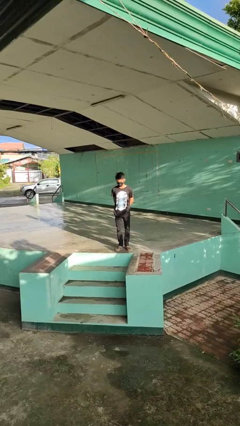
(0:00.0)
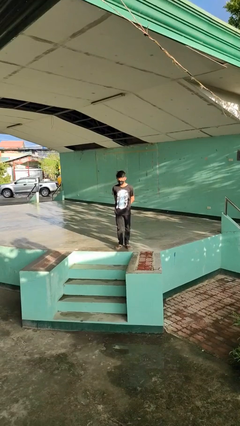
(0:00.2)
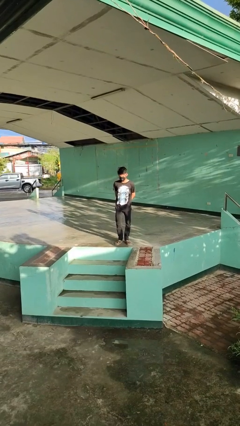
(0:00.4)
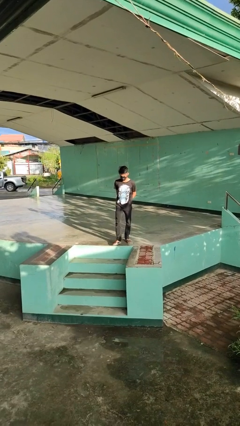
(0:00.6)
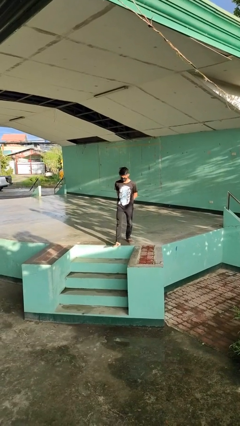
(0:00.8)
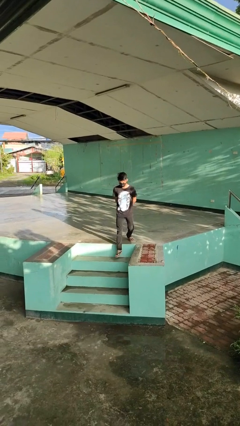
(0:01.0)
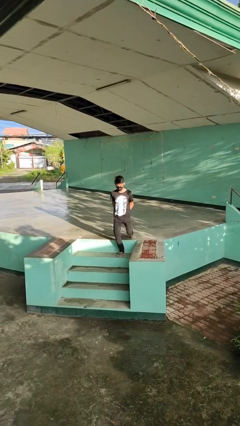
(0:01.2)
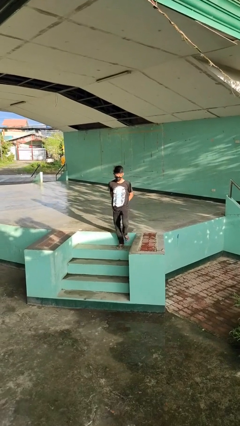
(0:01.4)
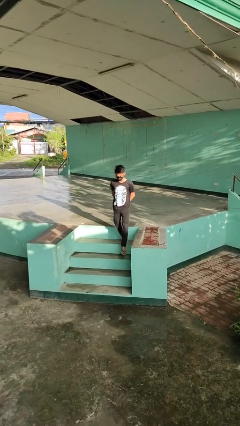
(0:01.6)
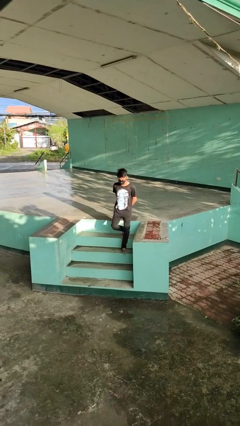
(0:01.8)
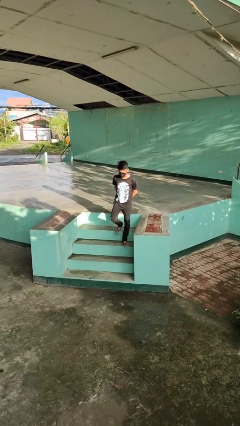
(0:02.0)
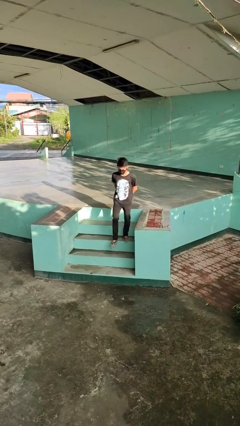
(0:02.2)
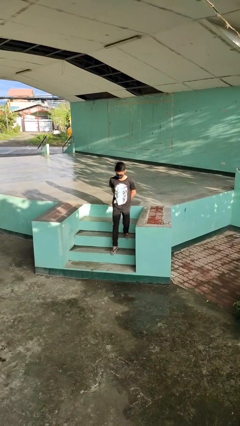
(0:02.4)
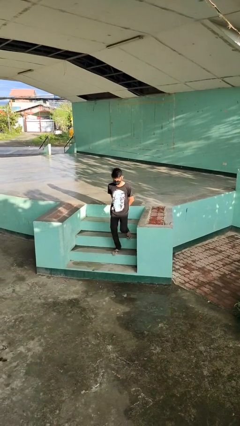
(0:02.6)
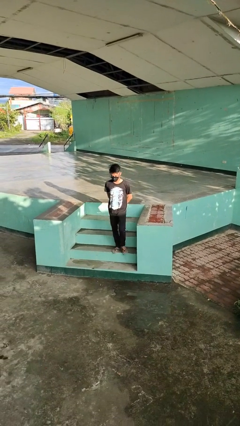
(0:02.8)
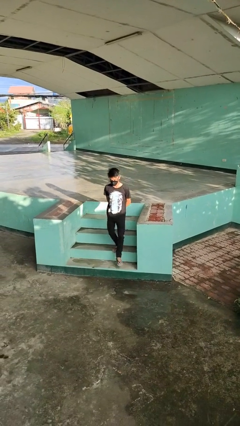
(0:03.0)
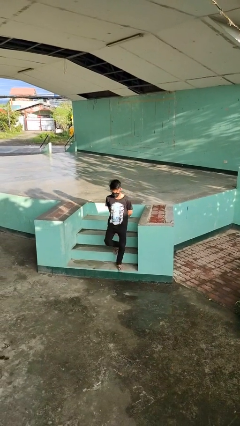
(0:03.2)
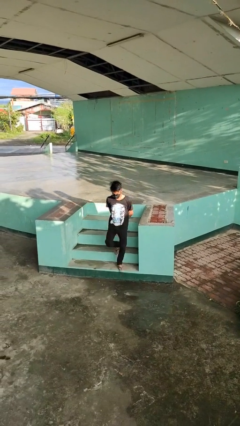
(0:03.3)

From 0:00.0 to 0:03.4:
person climbs down stairs

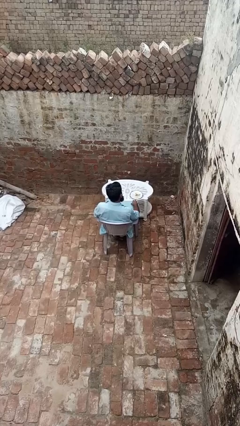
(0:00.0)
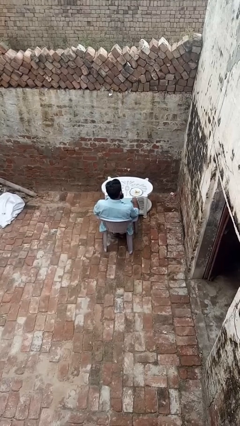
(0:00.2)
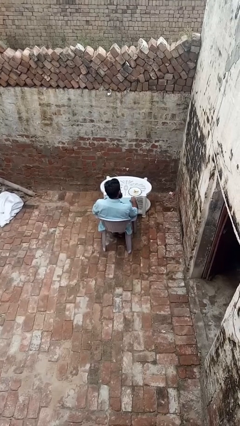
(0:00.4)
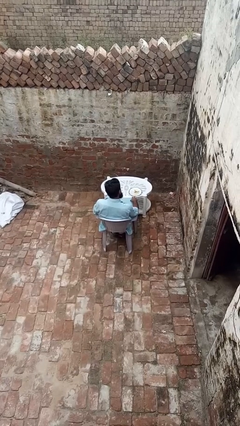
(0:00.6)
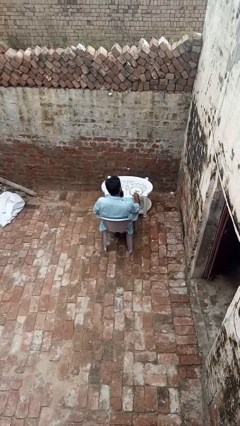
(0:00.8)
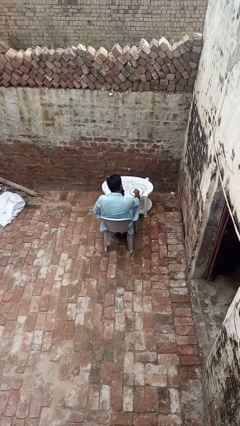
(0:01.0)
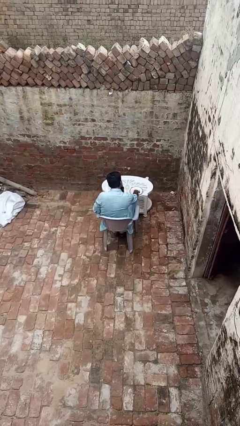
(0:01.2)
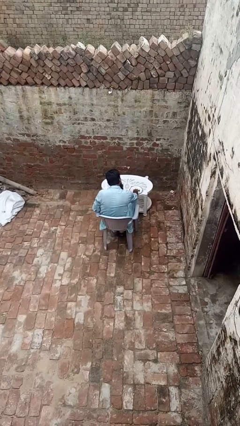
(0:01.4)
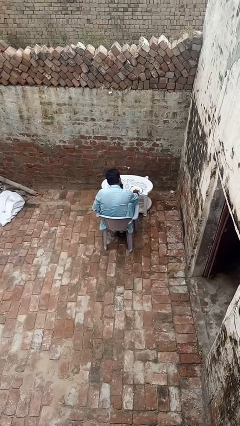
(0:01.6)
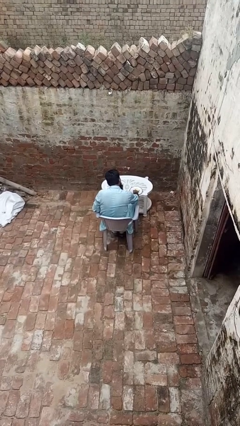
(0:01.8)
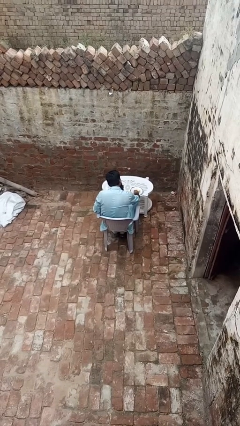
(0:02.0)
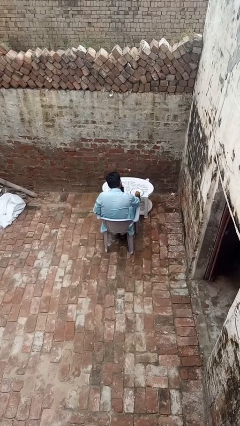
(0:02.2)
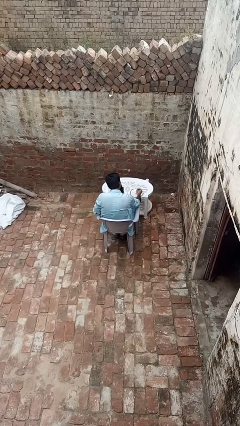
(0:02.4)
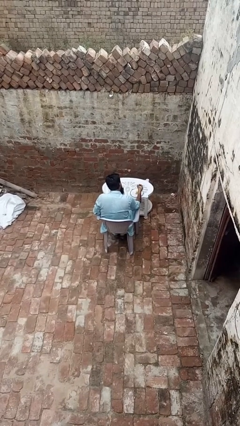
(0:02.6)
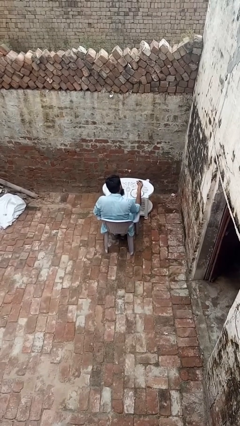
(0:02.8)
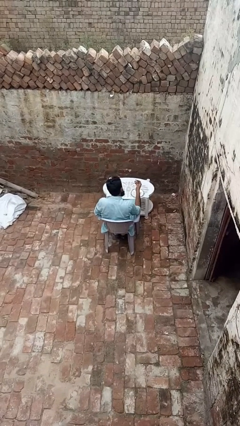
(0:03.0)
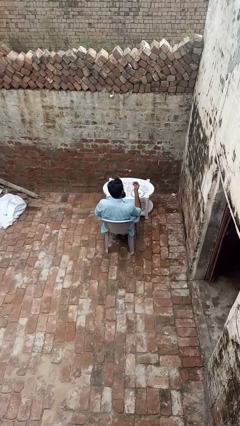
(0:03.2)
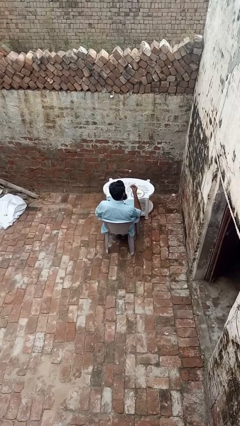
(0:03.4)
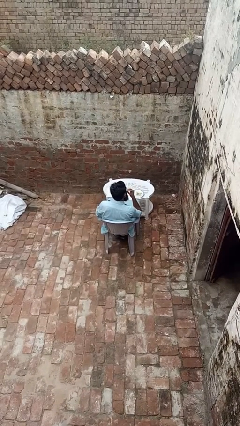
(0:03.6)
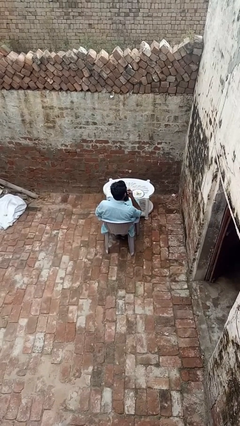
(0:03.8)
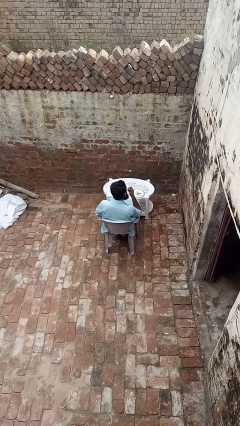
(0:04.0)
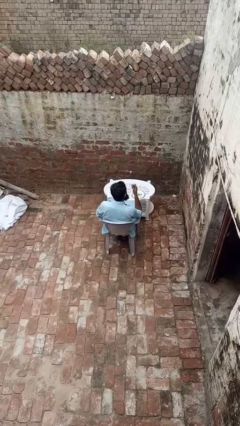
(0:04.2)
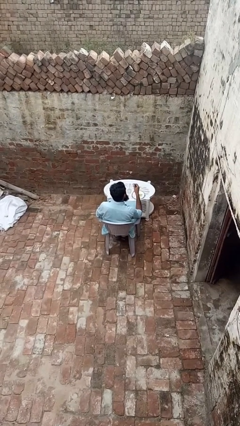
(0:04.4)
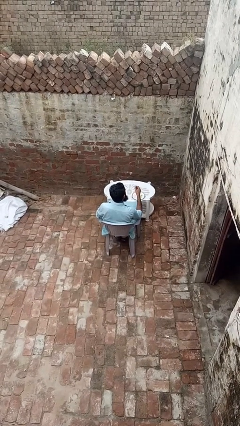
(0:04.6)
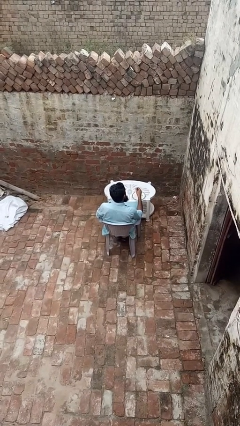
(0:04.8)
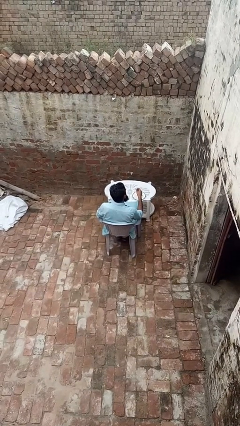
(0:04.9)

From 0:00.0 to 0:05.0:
person eats with hands

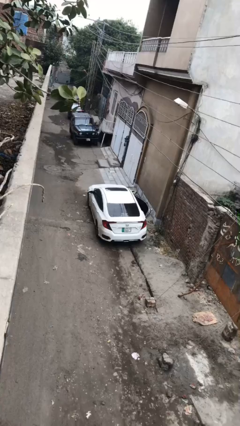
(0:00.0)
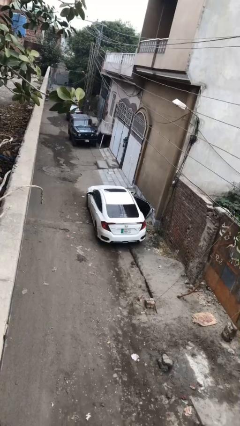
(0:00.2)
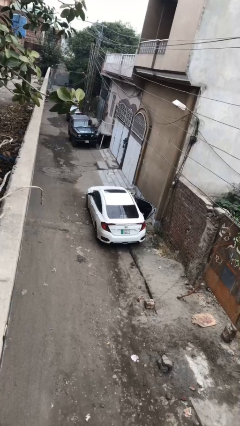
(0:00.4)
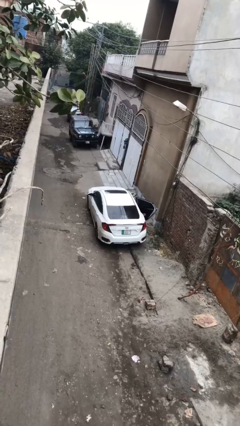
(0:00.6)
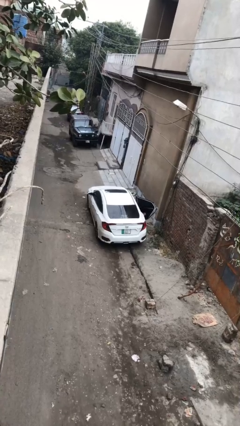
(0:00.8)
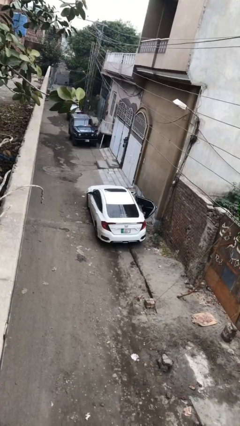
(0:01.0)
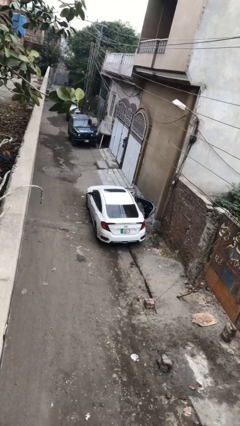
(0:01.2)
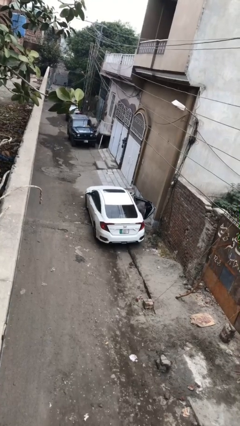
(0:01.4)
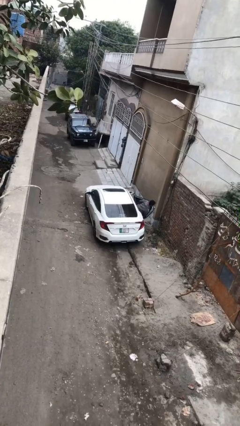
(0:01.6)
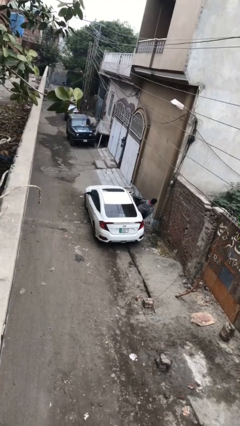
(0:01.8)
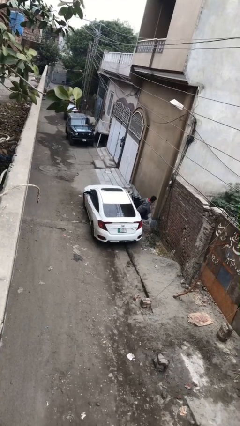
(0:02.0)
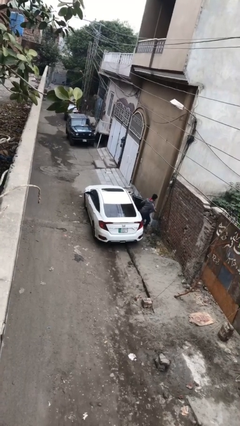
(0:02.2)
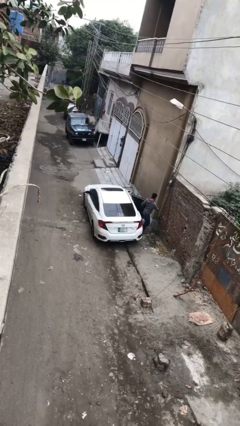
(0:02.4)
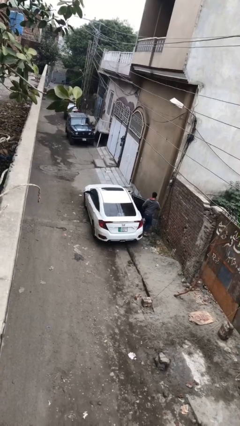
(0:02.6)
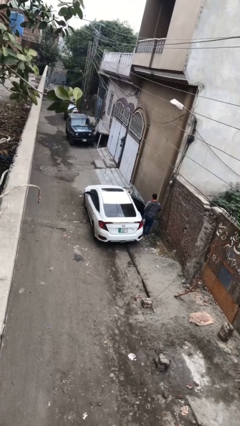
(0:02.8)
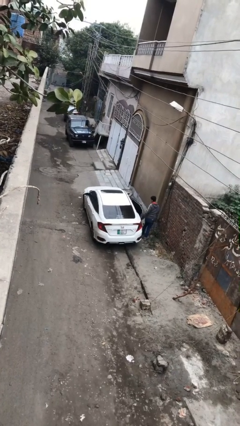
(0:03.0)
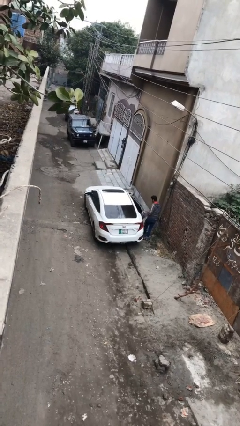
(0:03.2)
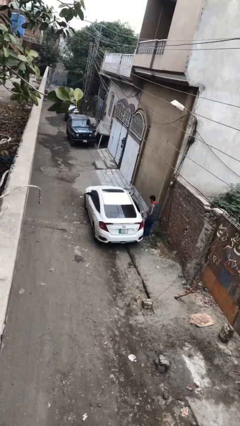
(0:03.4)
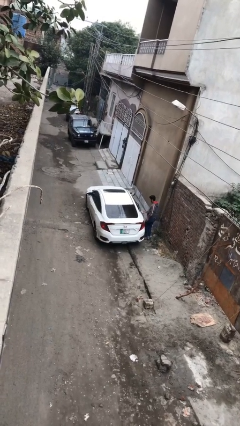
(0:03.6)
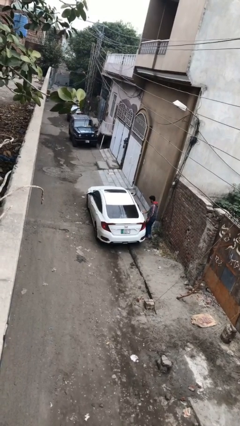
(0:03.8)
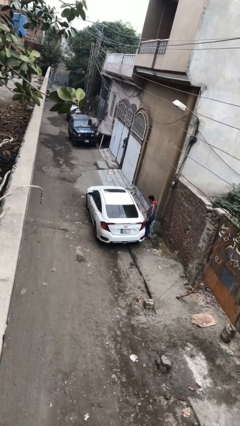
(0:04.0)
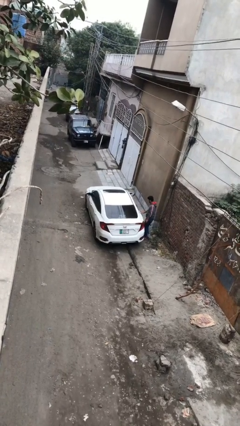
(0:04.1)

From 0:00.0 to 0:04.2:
car drops off person

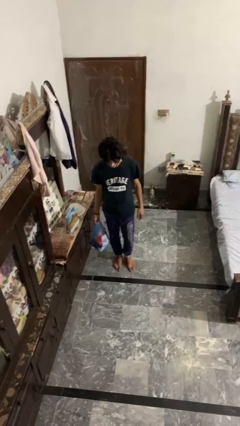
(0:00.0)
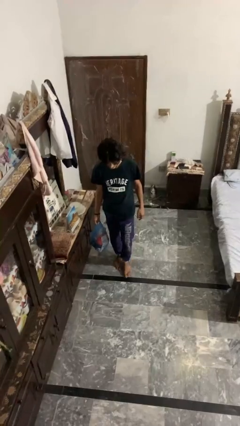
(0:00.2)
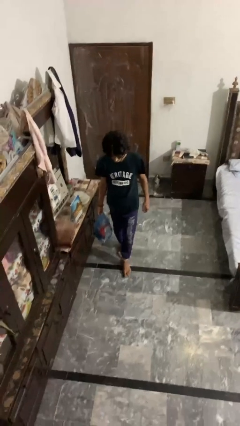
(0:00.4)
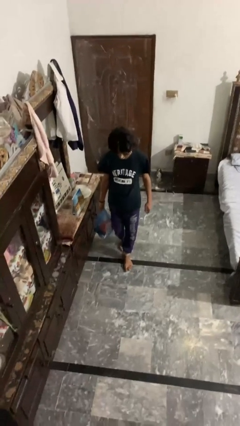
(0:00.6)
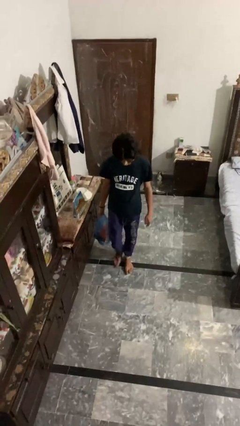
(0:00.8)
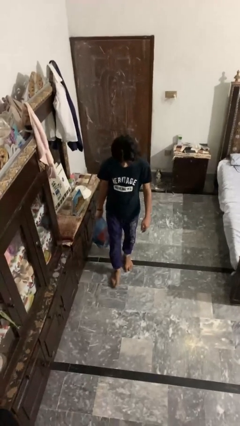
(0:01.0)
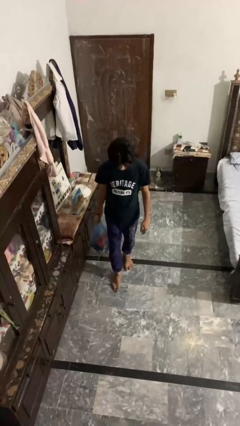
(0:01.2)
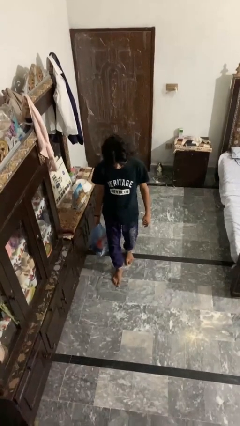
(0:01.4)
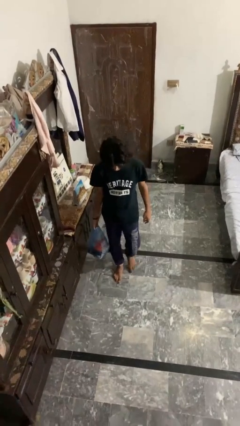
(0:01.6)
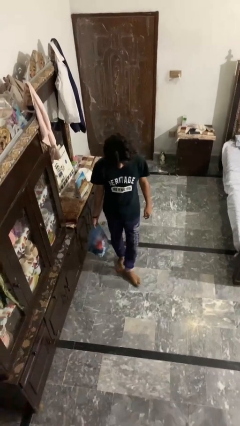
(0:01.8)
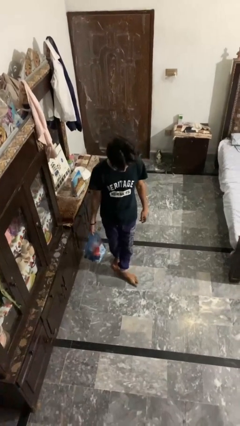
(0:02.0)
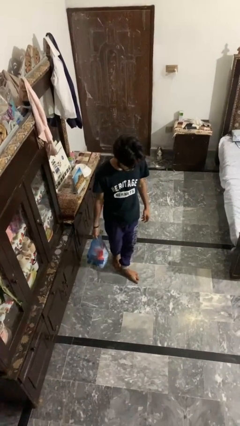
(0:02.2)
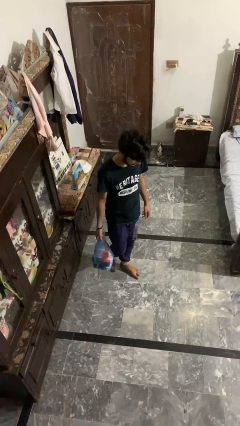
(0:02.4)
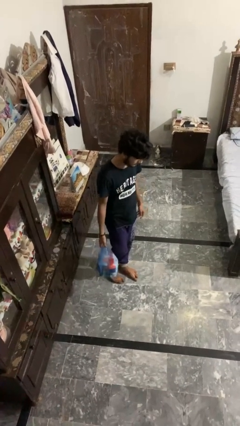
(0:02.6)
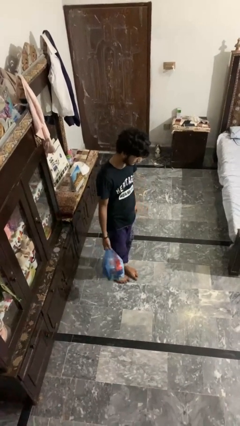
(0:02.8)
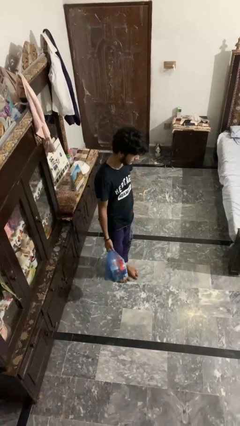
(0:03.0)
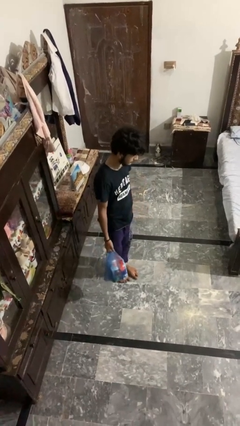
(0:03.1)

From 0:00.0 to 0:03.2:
person carries groceries

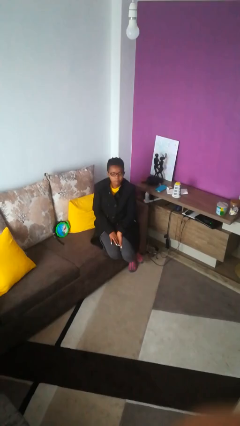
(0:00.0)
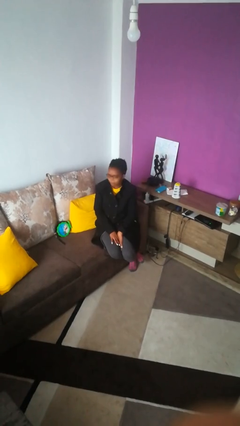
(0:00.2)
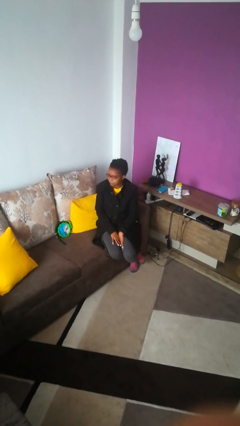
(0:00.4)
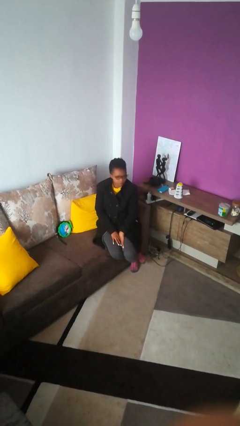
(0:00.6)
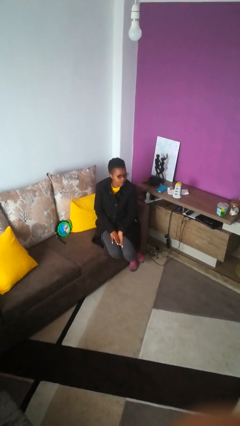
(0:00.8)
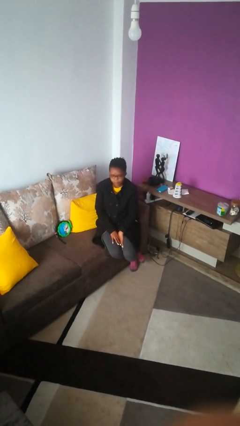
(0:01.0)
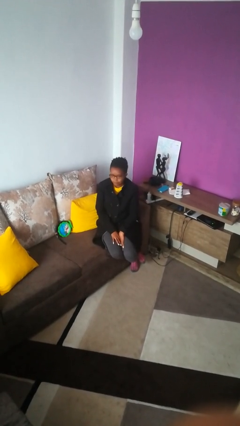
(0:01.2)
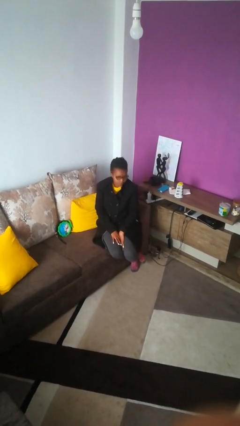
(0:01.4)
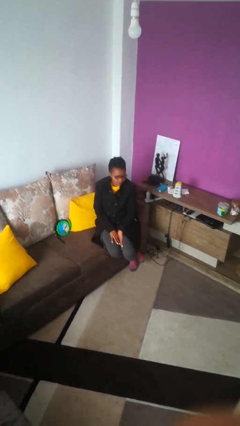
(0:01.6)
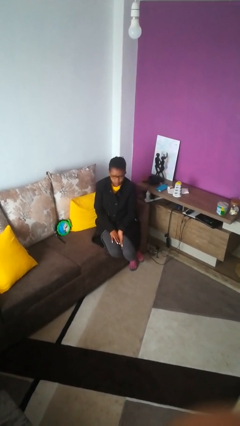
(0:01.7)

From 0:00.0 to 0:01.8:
person shakes head
